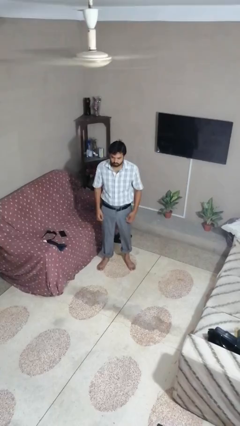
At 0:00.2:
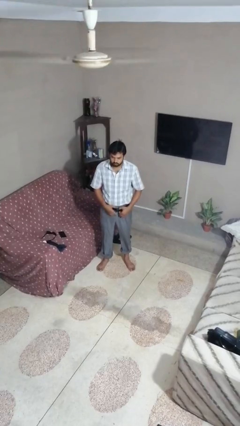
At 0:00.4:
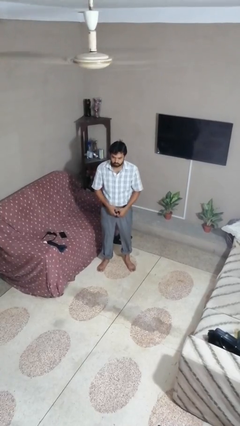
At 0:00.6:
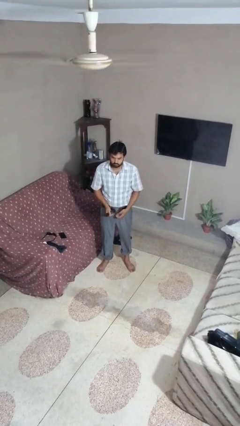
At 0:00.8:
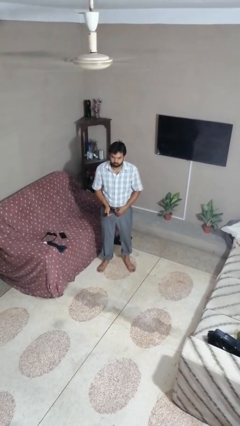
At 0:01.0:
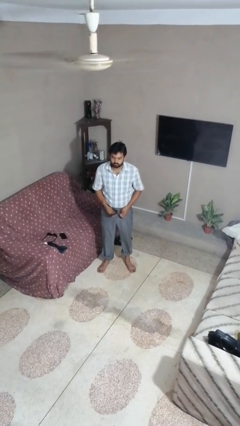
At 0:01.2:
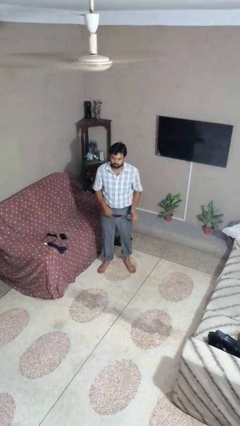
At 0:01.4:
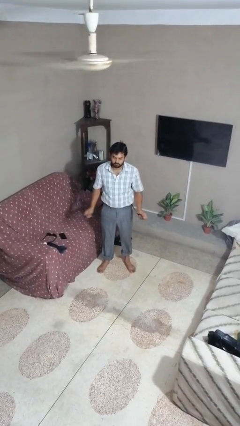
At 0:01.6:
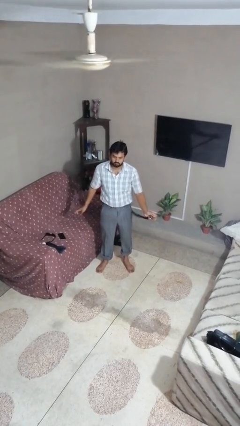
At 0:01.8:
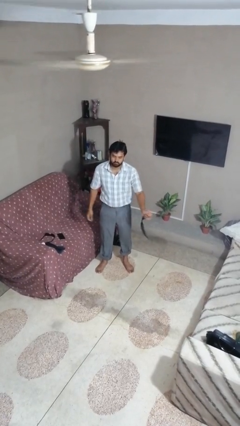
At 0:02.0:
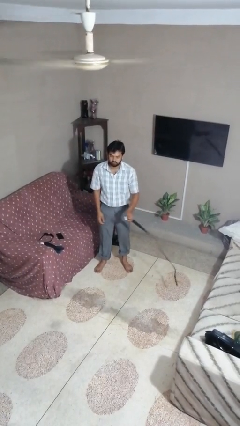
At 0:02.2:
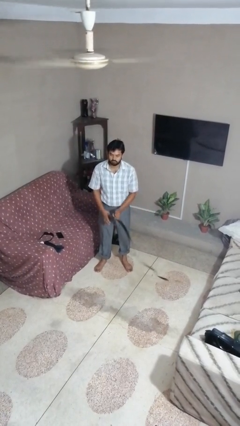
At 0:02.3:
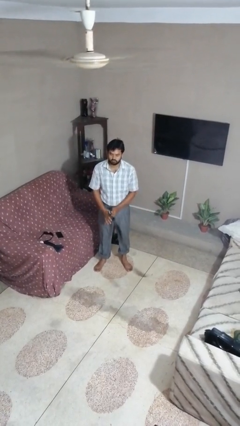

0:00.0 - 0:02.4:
person takes off belt

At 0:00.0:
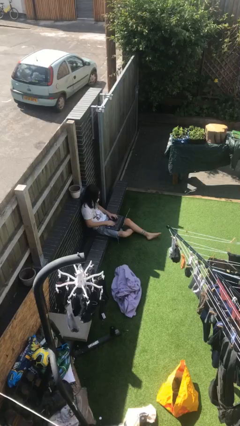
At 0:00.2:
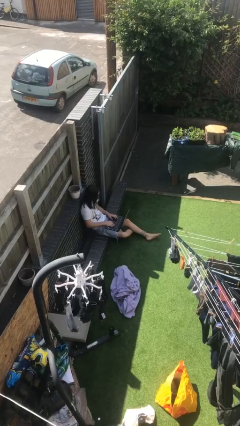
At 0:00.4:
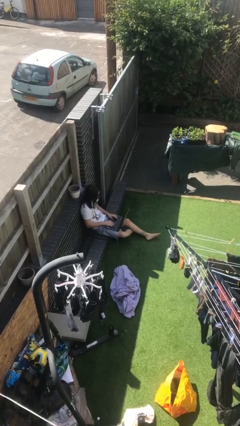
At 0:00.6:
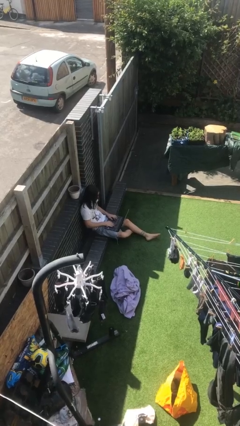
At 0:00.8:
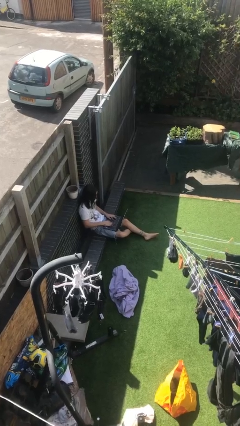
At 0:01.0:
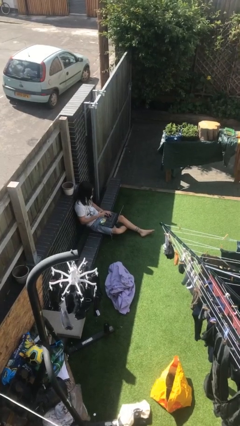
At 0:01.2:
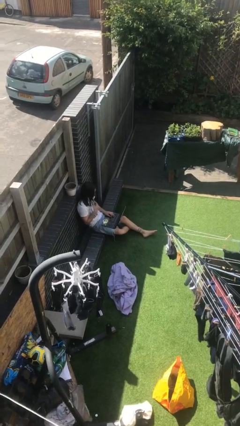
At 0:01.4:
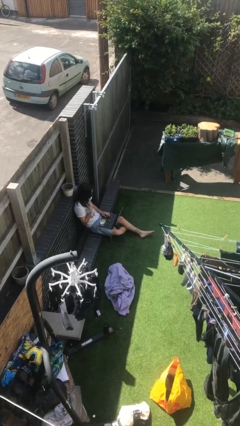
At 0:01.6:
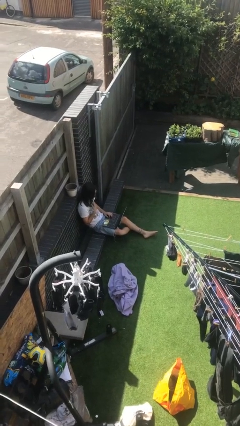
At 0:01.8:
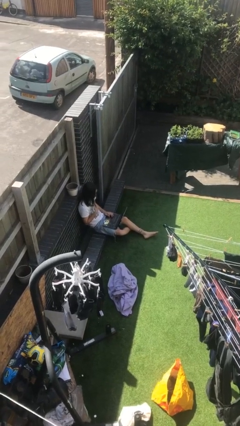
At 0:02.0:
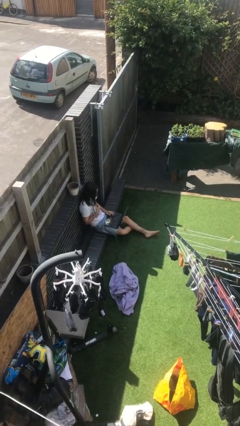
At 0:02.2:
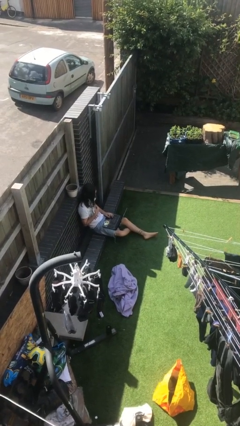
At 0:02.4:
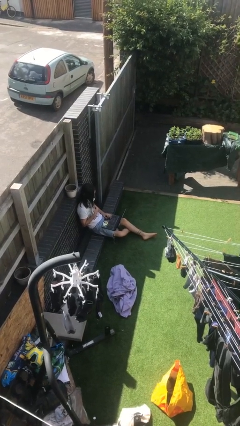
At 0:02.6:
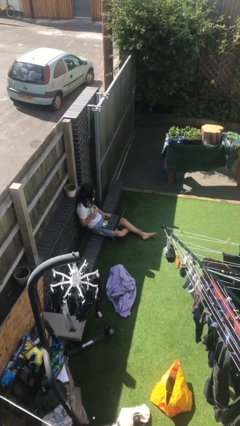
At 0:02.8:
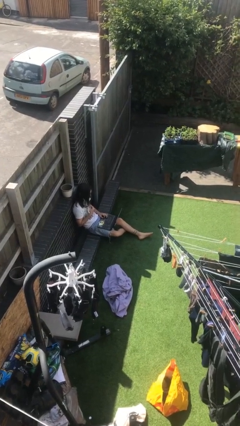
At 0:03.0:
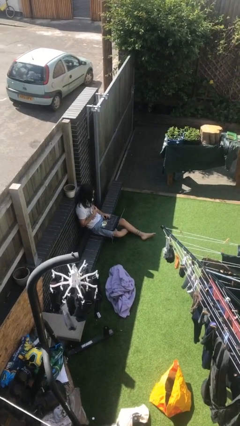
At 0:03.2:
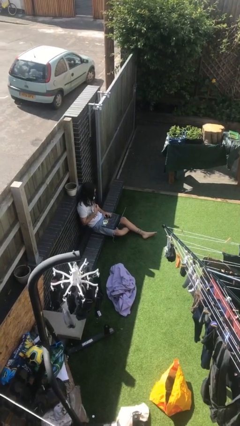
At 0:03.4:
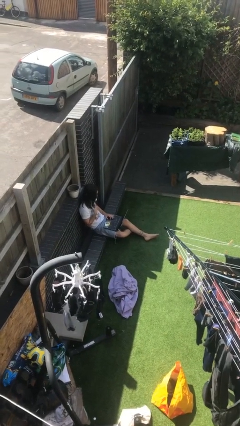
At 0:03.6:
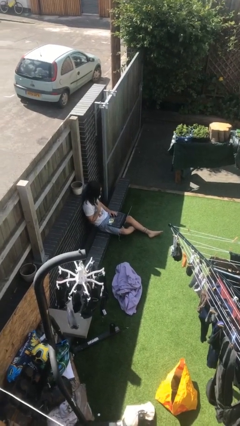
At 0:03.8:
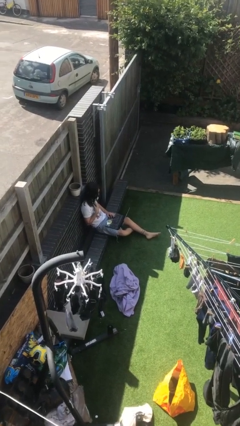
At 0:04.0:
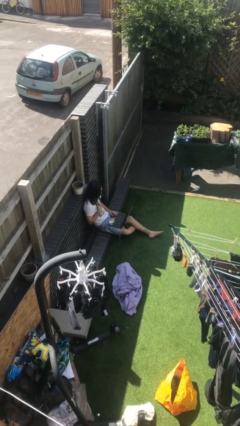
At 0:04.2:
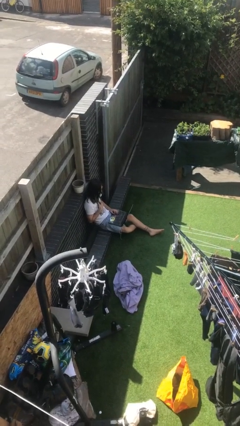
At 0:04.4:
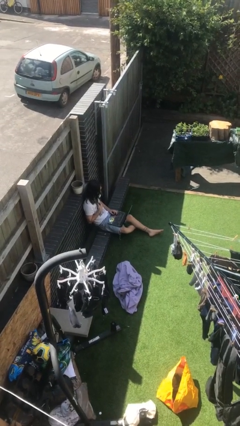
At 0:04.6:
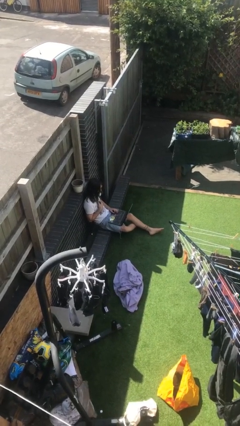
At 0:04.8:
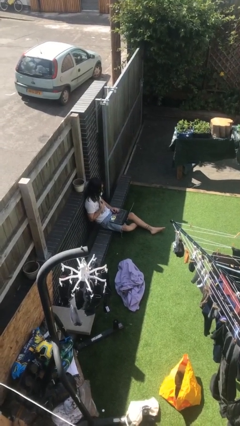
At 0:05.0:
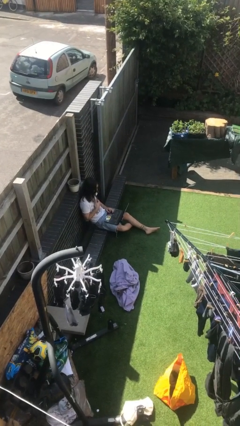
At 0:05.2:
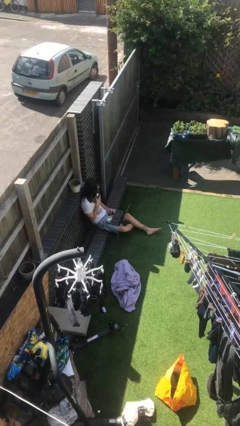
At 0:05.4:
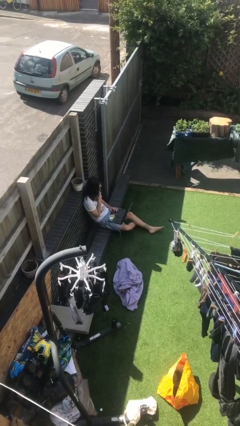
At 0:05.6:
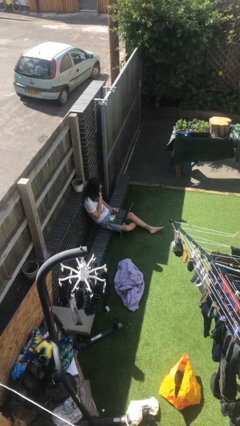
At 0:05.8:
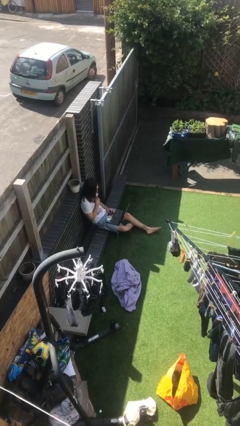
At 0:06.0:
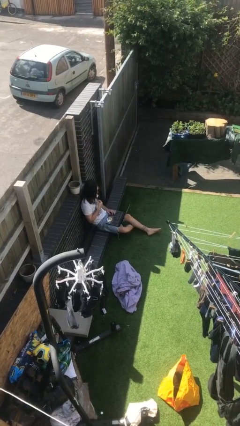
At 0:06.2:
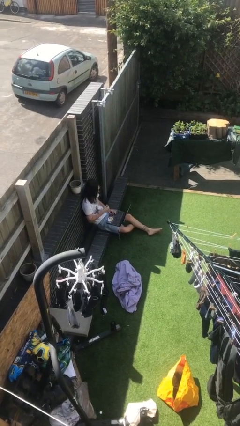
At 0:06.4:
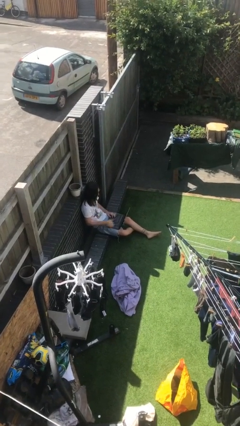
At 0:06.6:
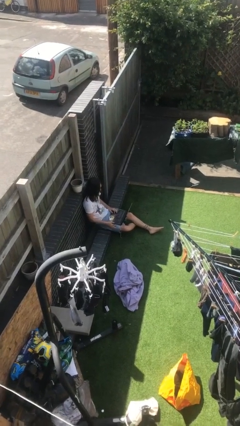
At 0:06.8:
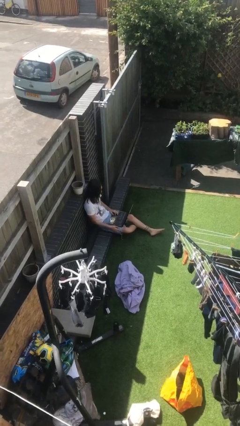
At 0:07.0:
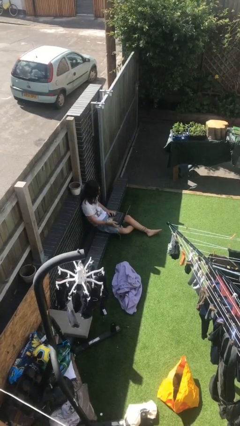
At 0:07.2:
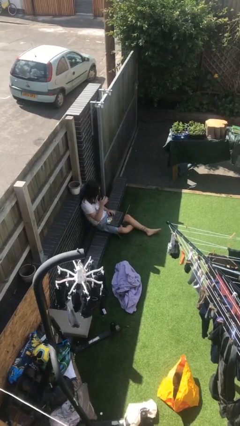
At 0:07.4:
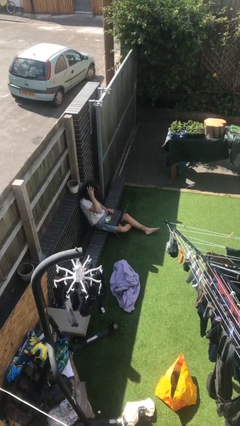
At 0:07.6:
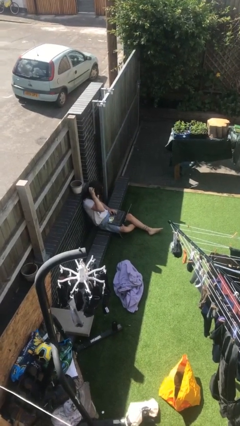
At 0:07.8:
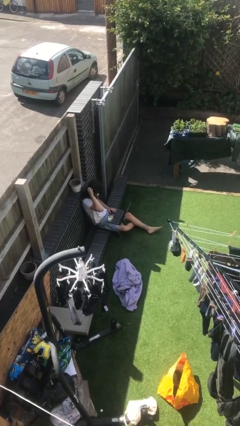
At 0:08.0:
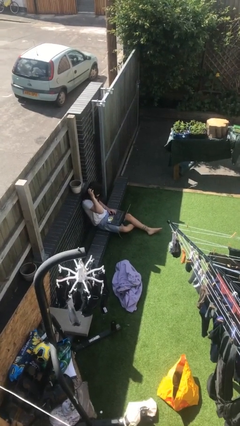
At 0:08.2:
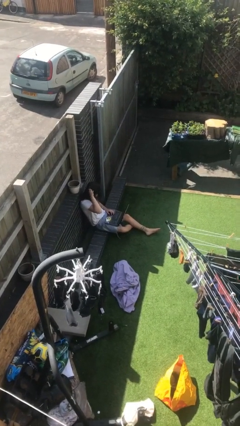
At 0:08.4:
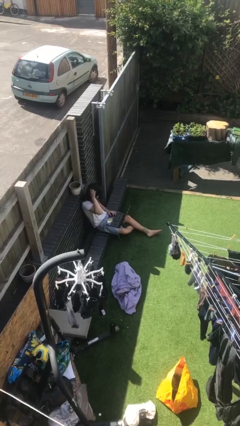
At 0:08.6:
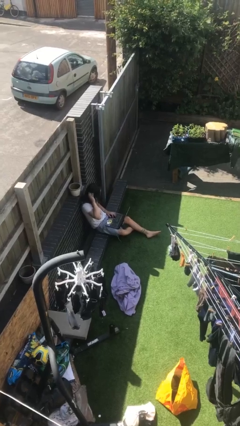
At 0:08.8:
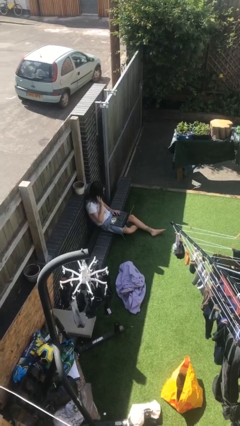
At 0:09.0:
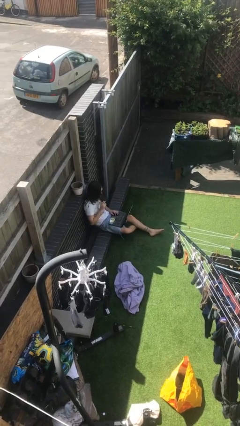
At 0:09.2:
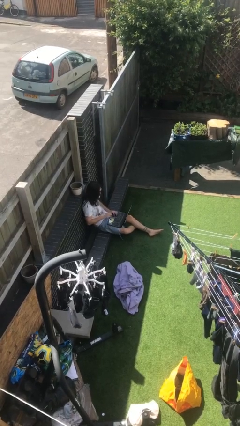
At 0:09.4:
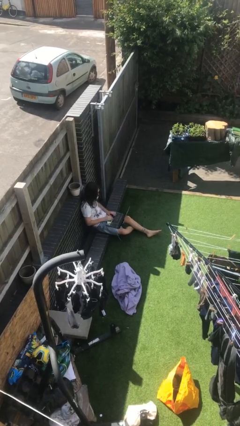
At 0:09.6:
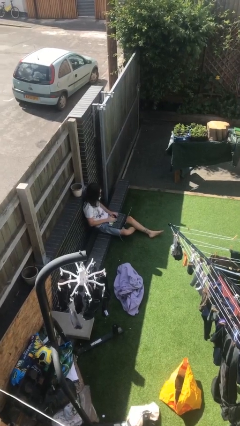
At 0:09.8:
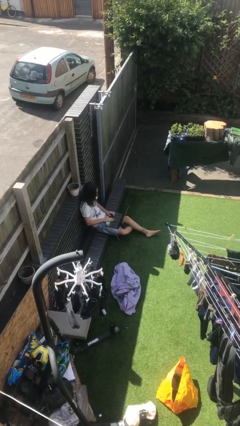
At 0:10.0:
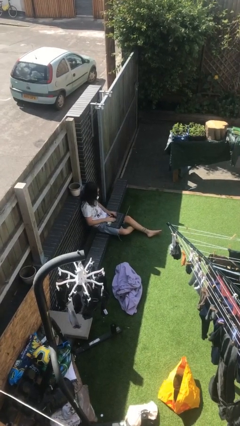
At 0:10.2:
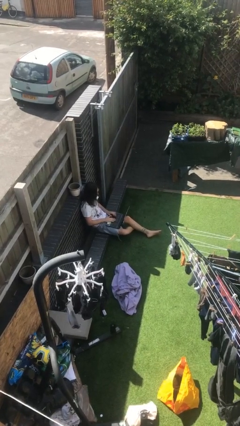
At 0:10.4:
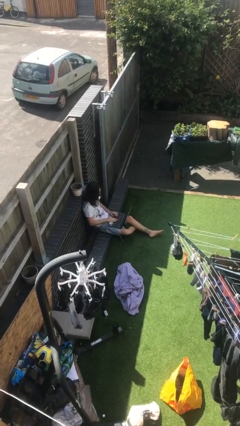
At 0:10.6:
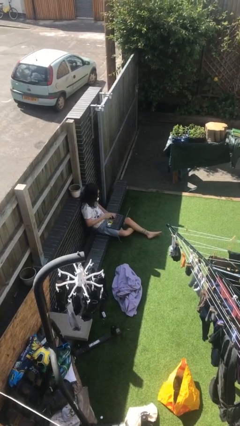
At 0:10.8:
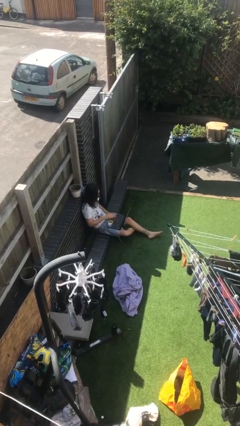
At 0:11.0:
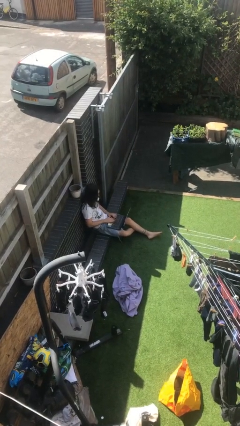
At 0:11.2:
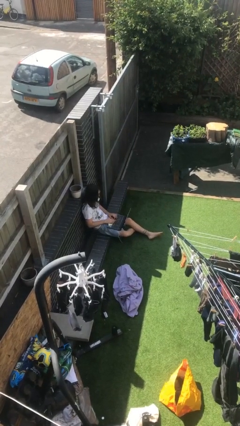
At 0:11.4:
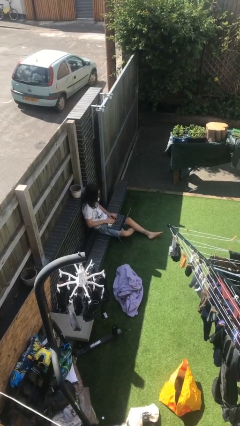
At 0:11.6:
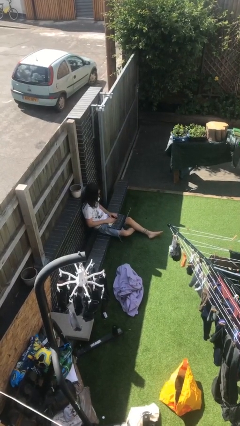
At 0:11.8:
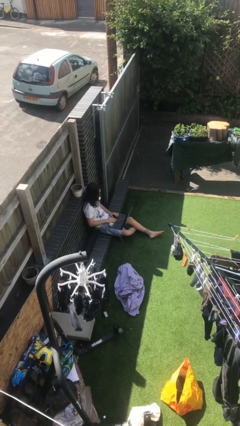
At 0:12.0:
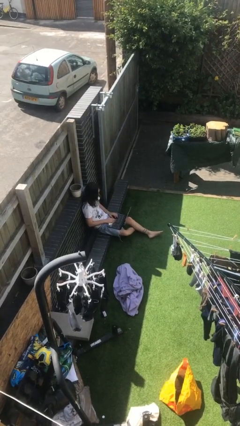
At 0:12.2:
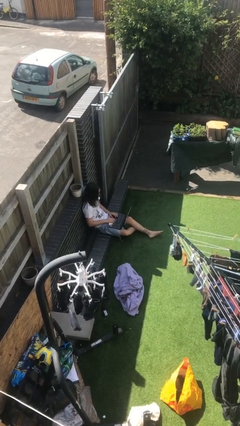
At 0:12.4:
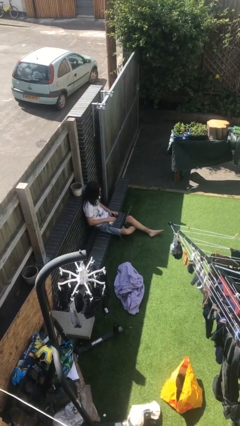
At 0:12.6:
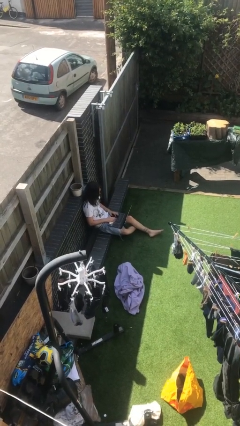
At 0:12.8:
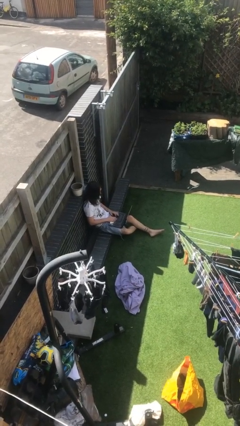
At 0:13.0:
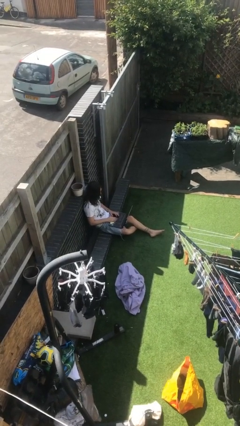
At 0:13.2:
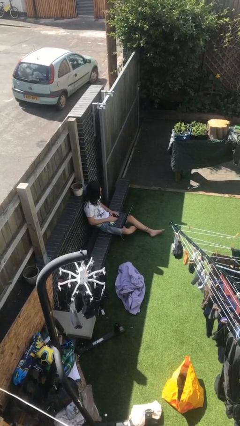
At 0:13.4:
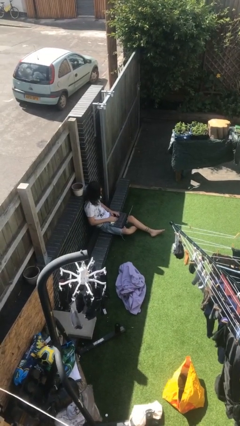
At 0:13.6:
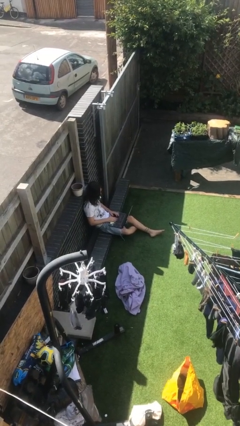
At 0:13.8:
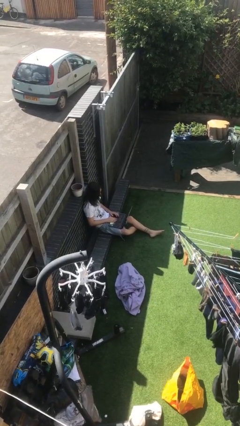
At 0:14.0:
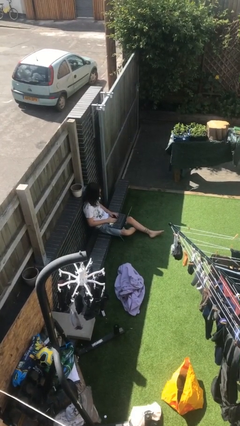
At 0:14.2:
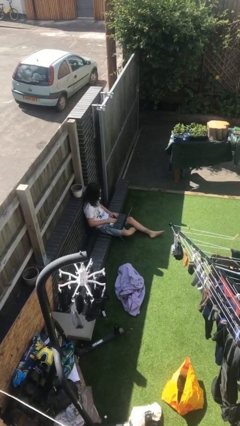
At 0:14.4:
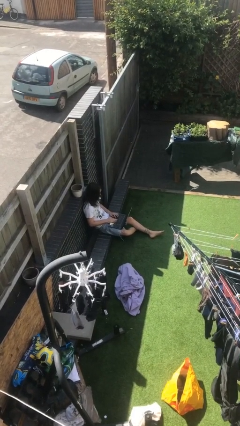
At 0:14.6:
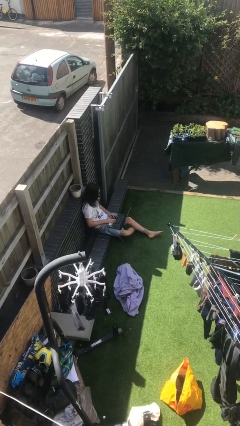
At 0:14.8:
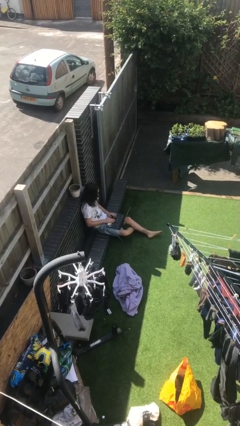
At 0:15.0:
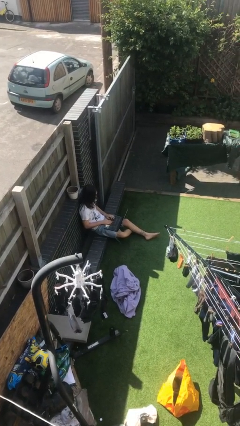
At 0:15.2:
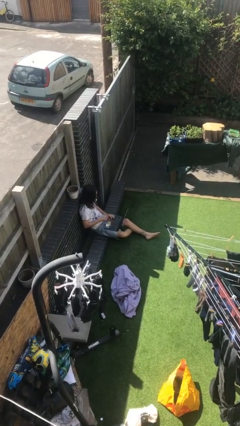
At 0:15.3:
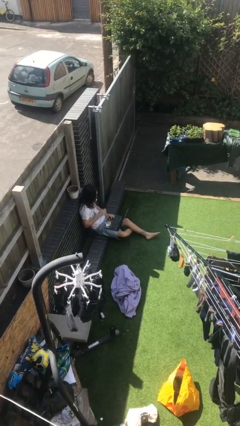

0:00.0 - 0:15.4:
person interacts with laptop

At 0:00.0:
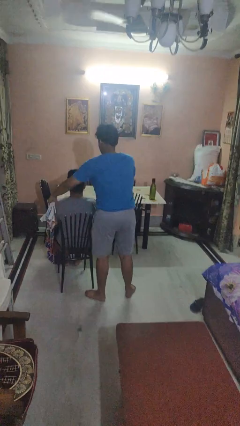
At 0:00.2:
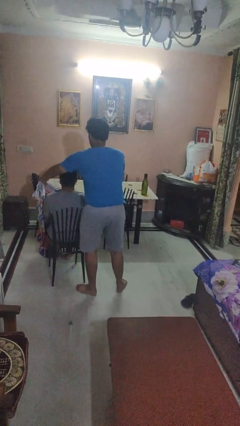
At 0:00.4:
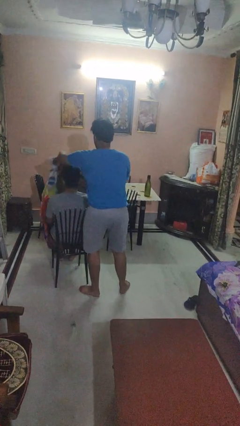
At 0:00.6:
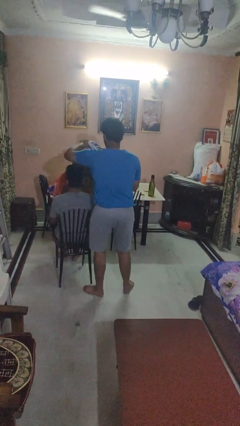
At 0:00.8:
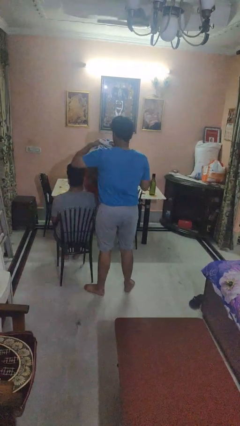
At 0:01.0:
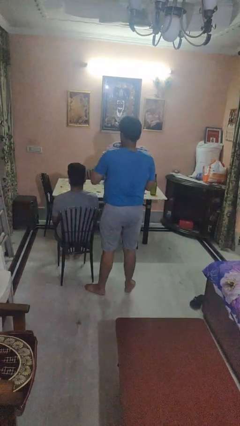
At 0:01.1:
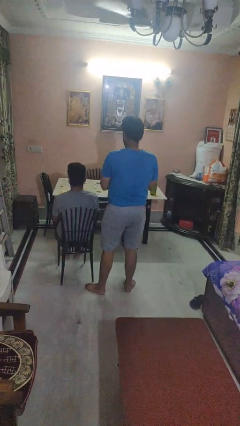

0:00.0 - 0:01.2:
person uncovers friend with blanket
